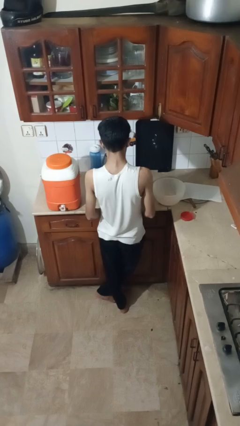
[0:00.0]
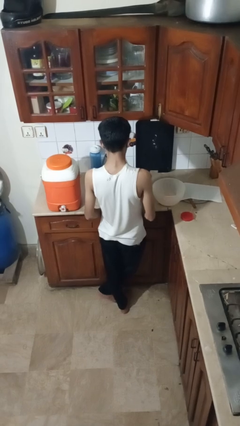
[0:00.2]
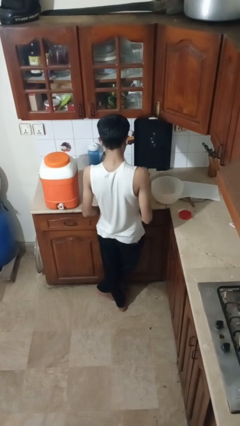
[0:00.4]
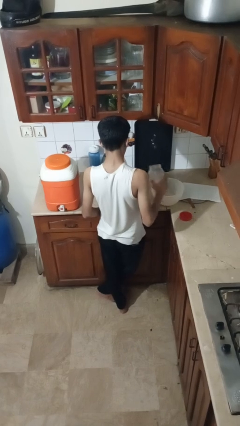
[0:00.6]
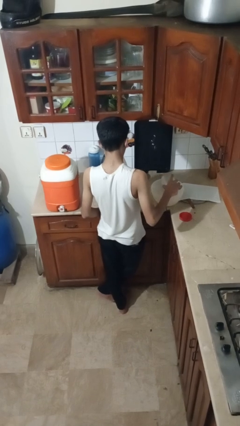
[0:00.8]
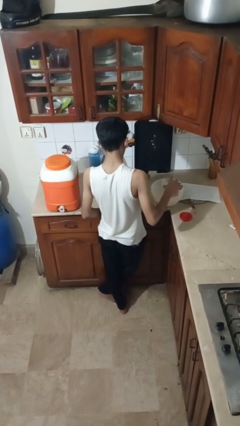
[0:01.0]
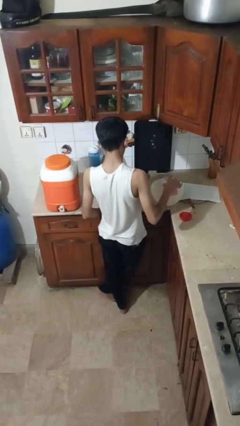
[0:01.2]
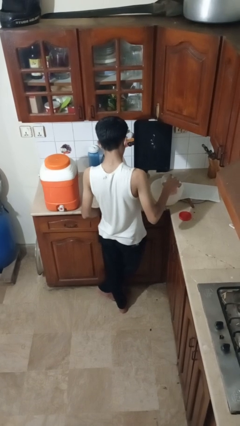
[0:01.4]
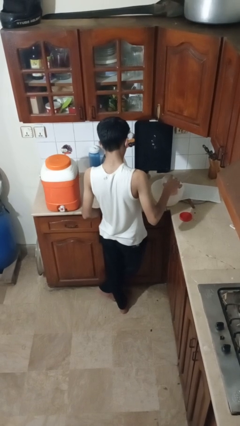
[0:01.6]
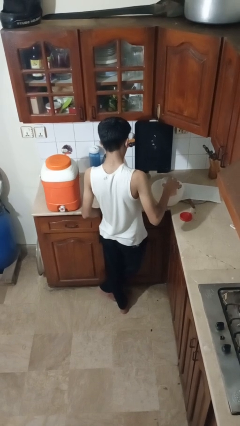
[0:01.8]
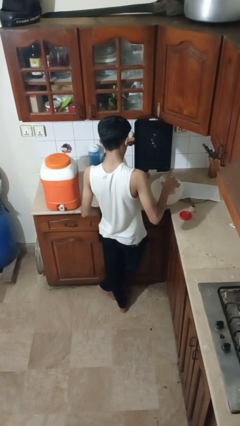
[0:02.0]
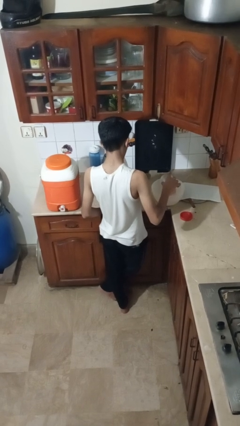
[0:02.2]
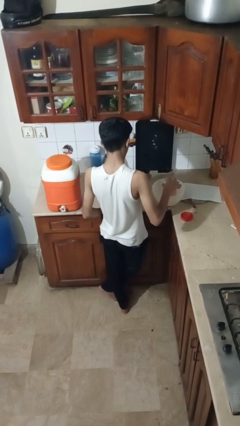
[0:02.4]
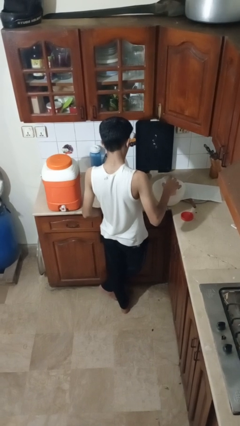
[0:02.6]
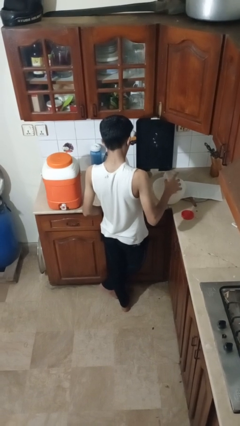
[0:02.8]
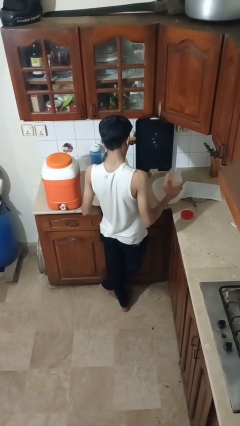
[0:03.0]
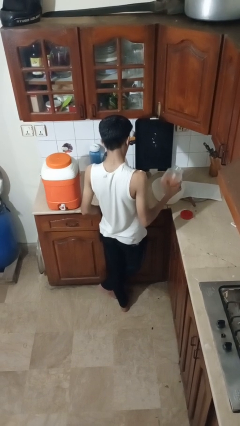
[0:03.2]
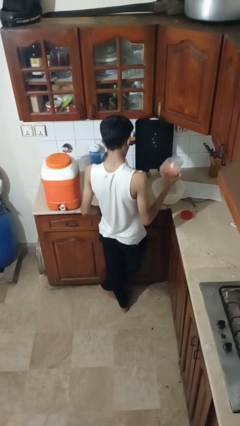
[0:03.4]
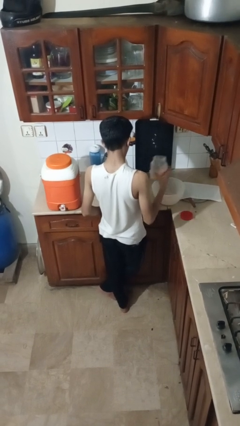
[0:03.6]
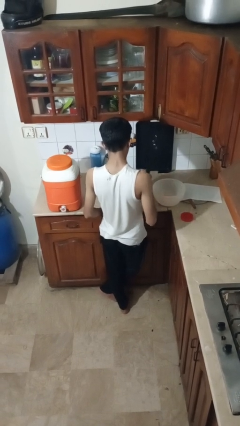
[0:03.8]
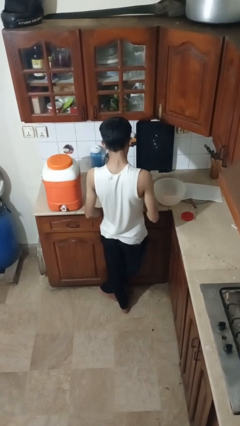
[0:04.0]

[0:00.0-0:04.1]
person pours into bowl

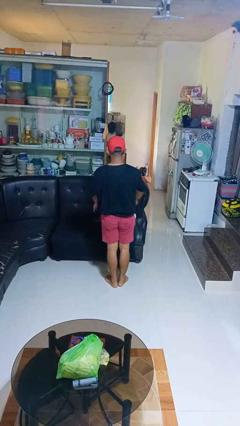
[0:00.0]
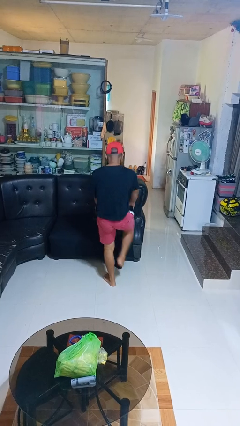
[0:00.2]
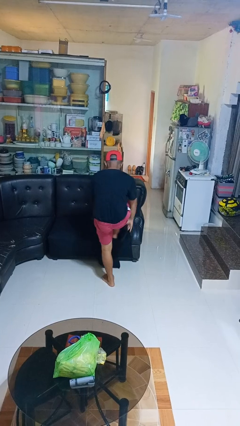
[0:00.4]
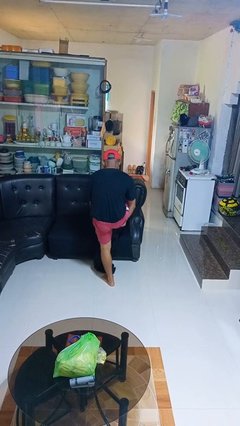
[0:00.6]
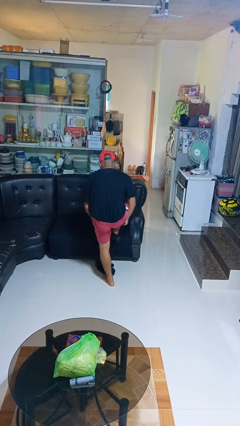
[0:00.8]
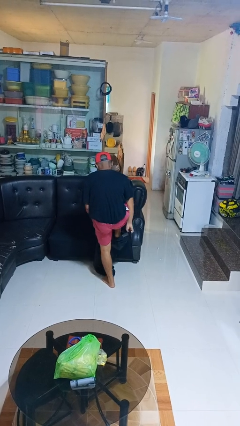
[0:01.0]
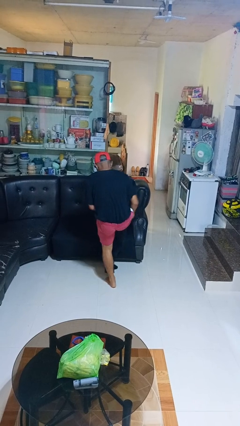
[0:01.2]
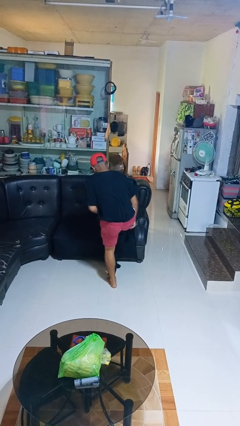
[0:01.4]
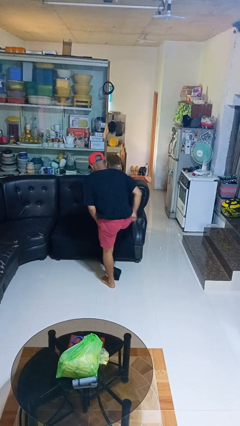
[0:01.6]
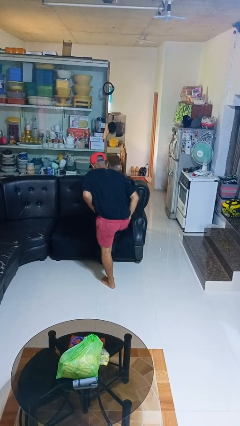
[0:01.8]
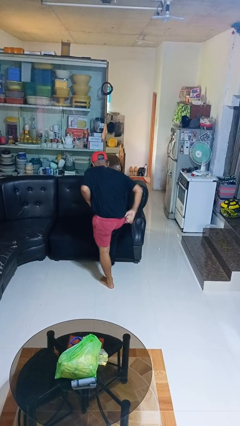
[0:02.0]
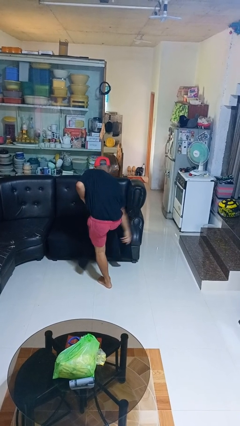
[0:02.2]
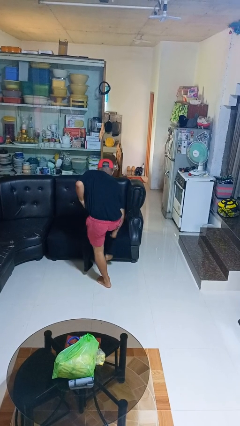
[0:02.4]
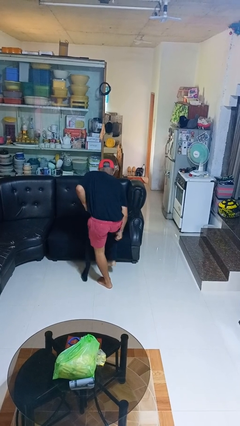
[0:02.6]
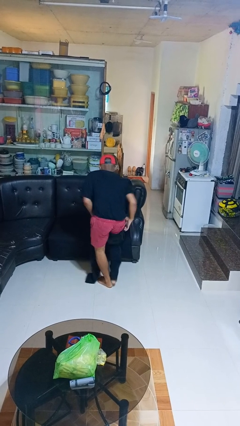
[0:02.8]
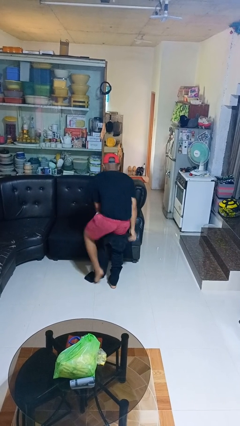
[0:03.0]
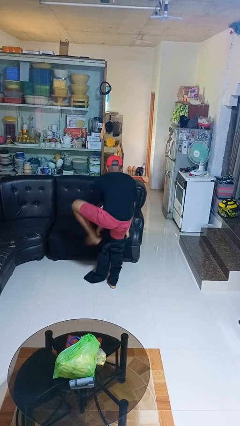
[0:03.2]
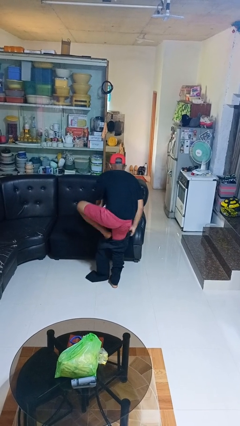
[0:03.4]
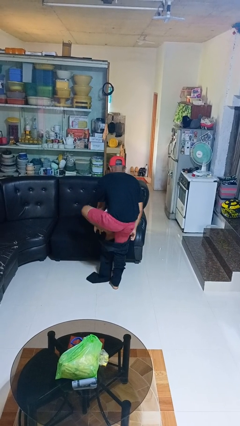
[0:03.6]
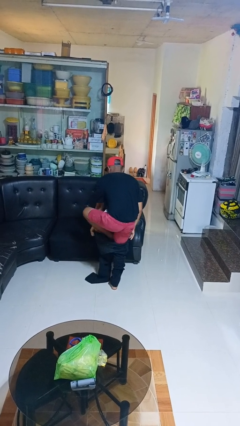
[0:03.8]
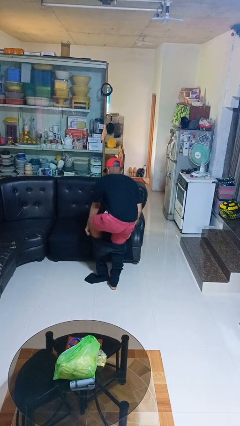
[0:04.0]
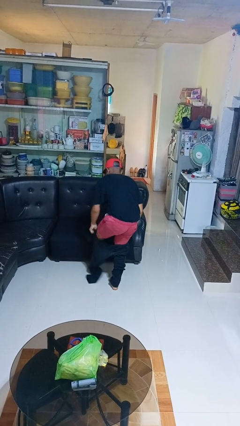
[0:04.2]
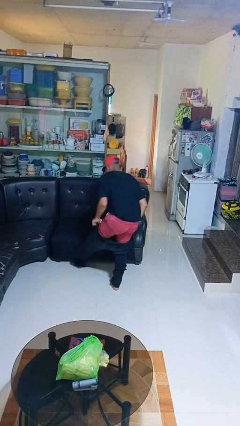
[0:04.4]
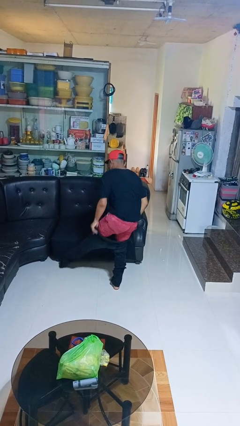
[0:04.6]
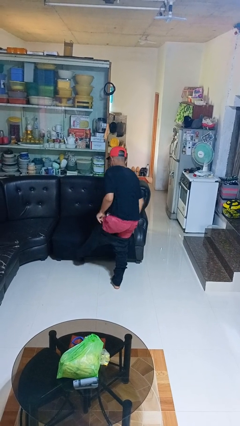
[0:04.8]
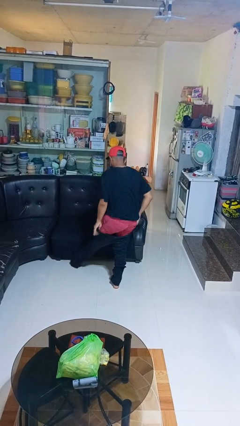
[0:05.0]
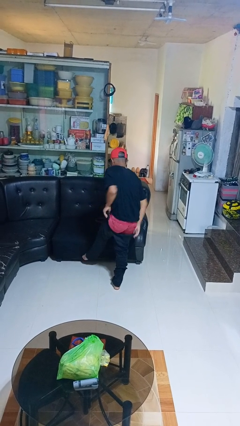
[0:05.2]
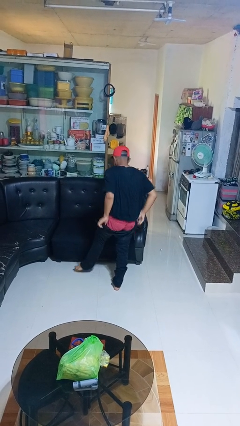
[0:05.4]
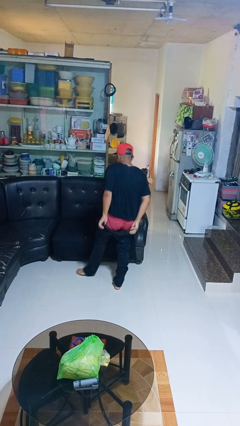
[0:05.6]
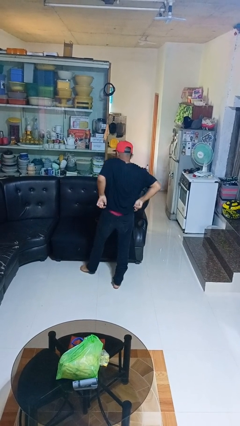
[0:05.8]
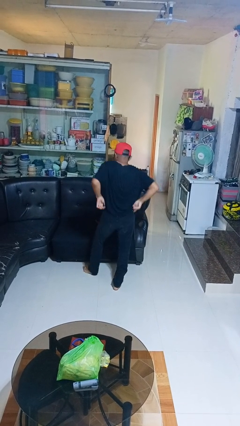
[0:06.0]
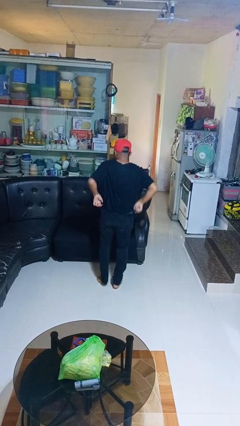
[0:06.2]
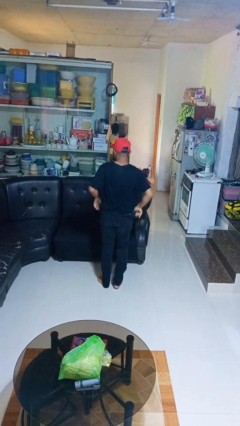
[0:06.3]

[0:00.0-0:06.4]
person puts on pants

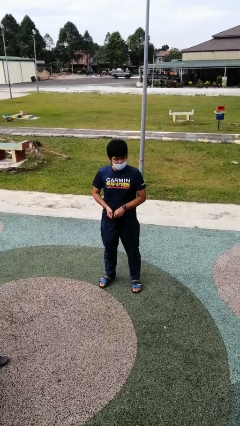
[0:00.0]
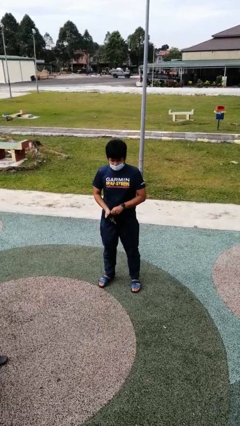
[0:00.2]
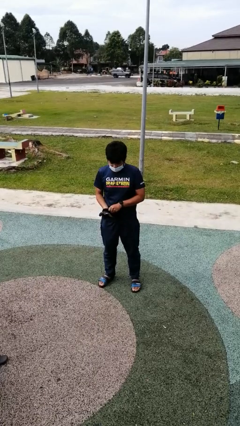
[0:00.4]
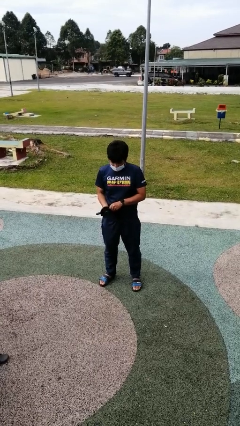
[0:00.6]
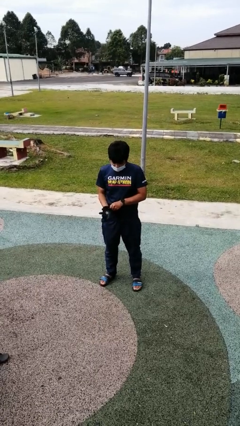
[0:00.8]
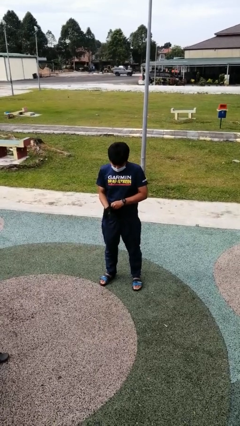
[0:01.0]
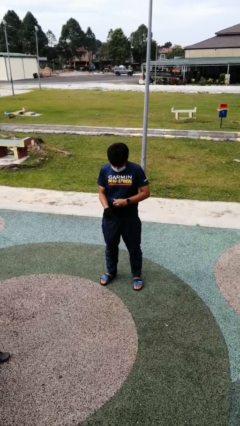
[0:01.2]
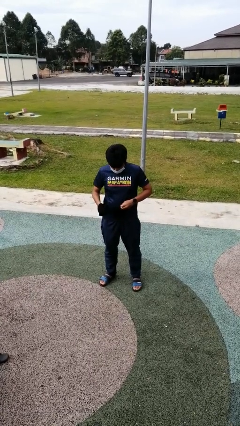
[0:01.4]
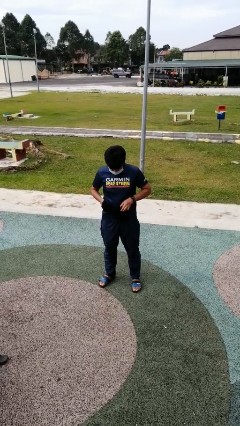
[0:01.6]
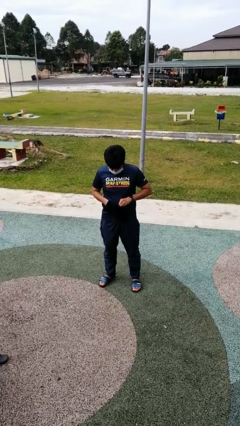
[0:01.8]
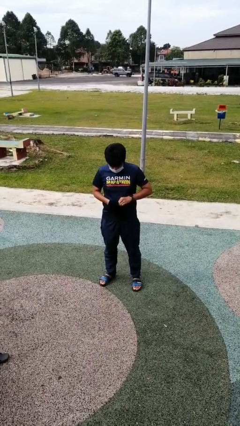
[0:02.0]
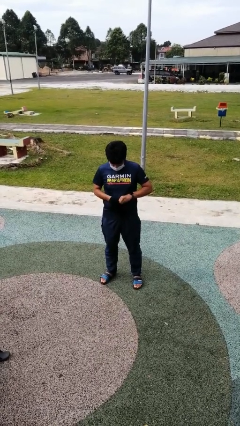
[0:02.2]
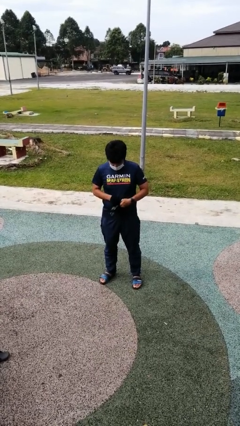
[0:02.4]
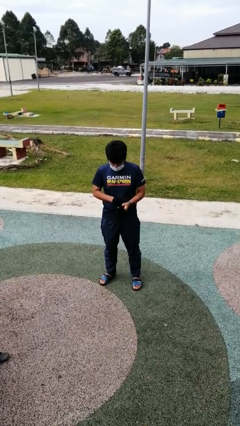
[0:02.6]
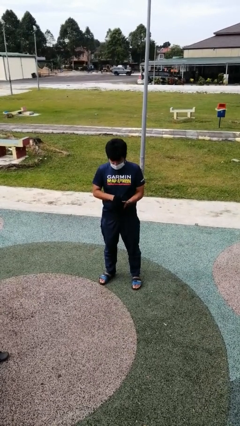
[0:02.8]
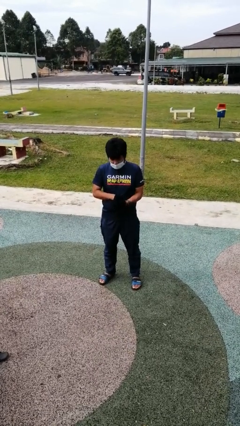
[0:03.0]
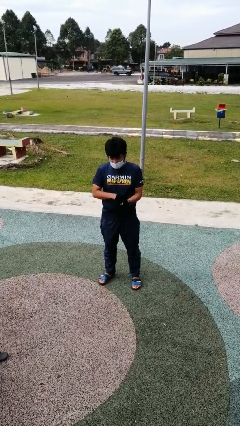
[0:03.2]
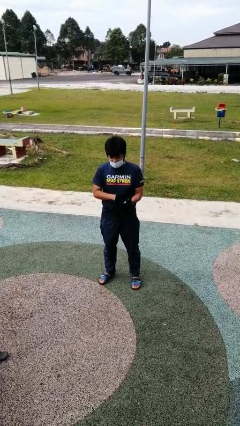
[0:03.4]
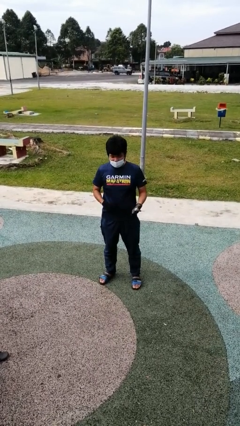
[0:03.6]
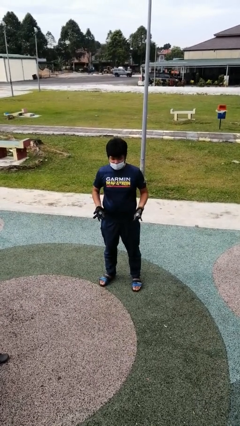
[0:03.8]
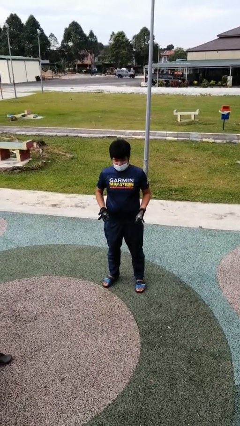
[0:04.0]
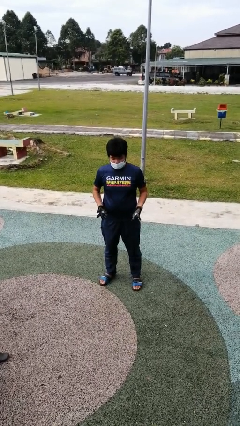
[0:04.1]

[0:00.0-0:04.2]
person puts on gloves

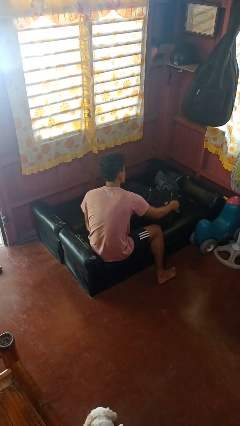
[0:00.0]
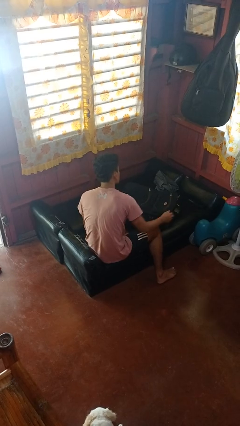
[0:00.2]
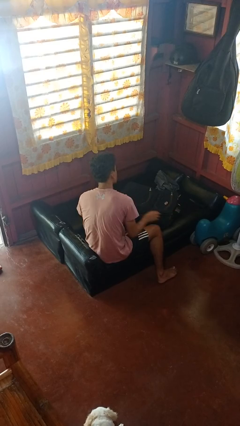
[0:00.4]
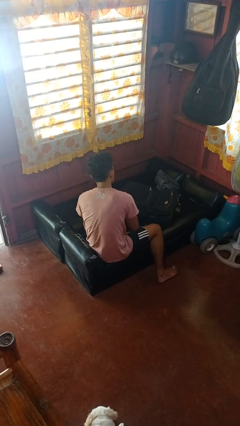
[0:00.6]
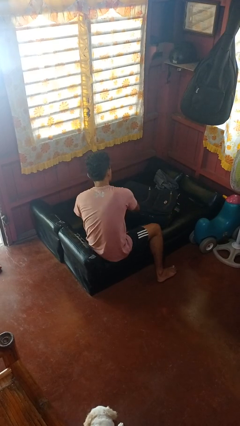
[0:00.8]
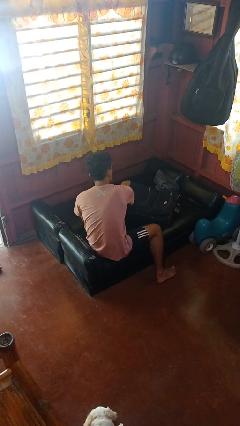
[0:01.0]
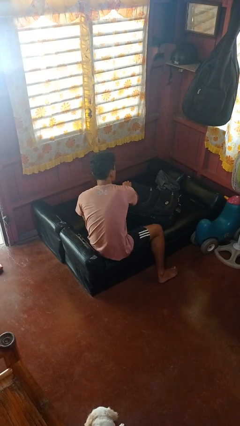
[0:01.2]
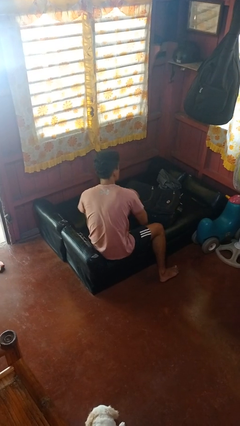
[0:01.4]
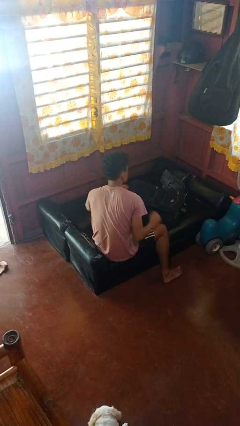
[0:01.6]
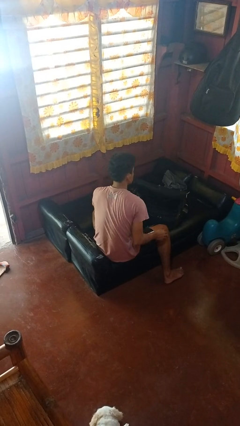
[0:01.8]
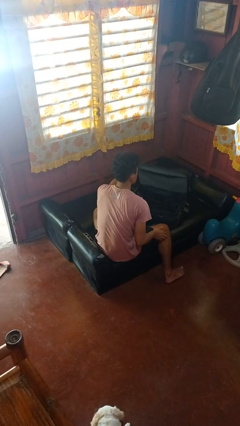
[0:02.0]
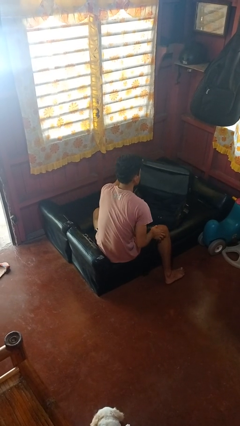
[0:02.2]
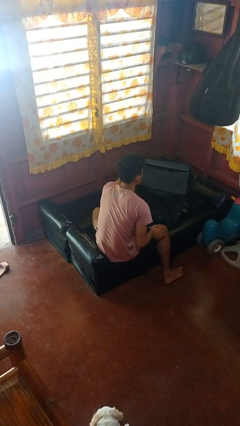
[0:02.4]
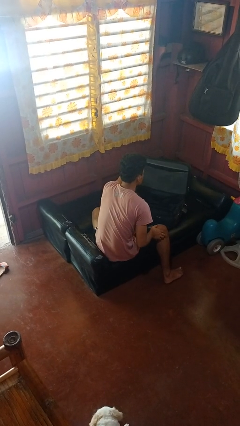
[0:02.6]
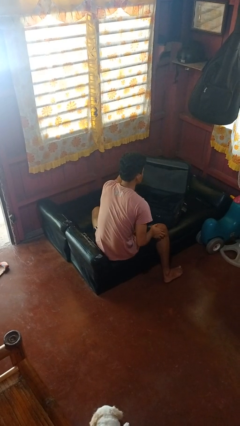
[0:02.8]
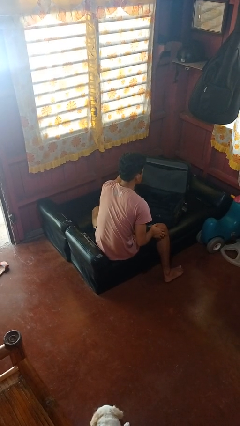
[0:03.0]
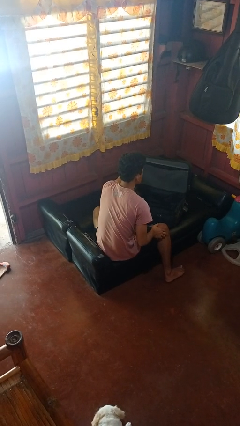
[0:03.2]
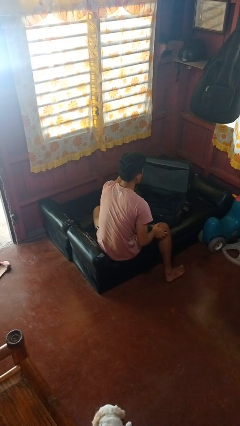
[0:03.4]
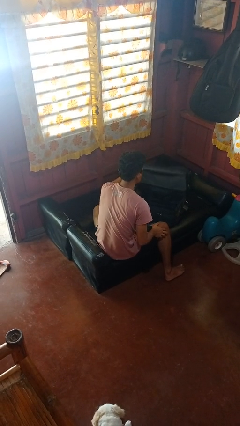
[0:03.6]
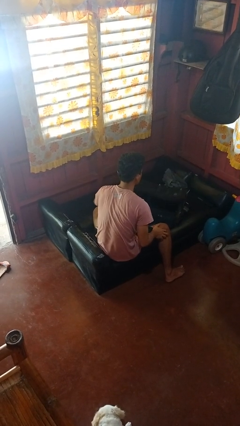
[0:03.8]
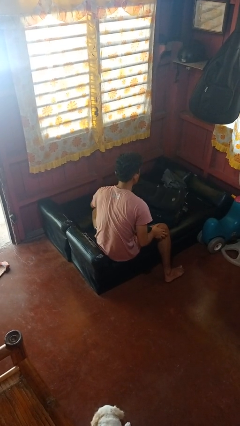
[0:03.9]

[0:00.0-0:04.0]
person opens suitcase
